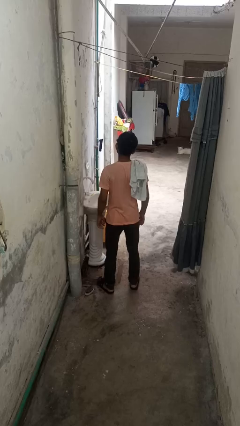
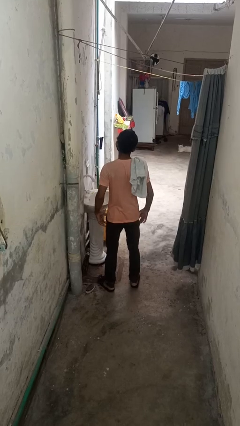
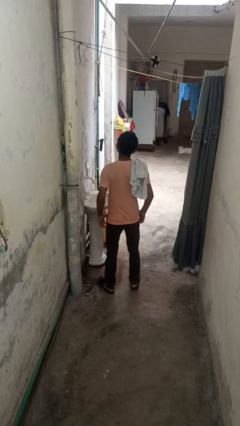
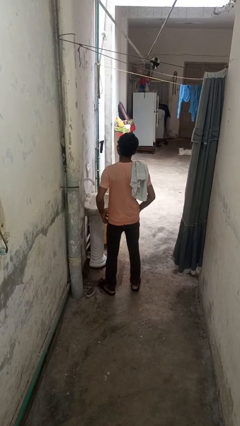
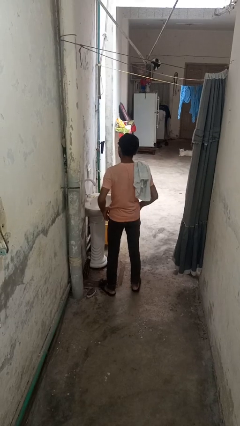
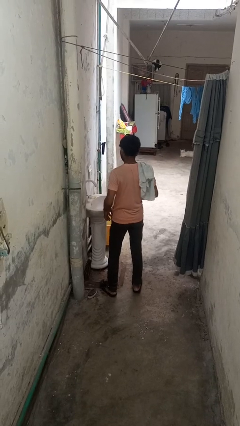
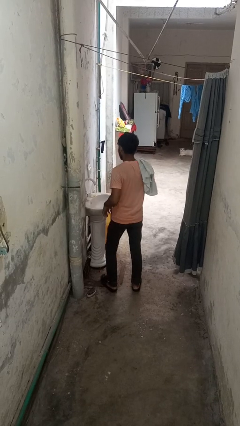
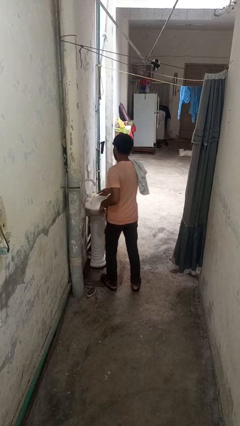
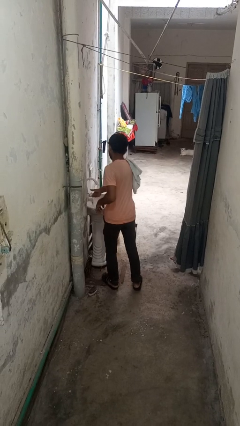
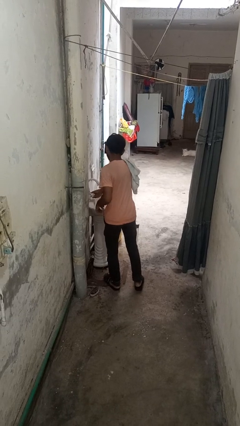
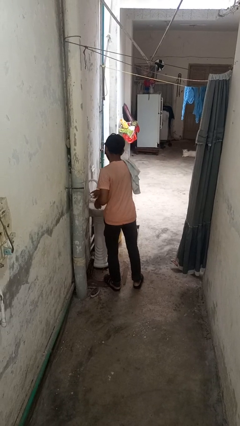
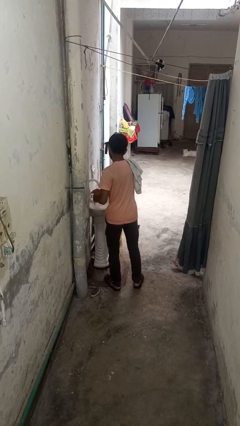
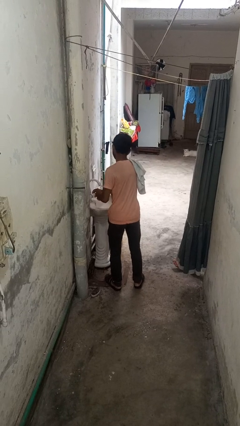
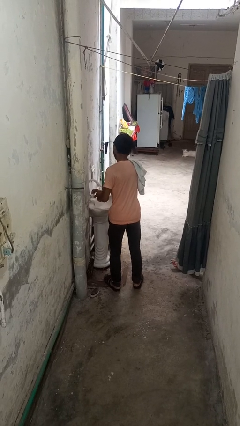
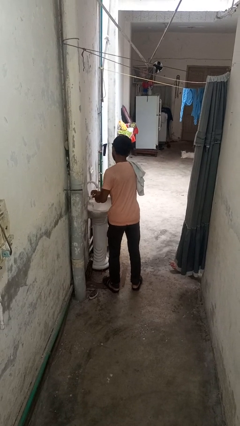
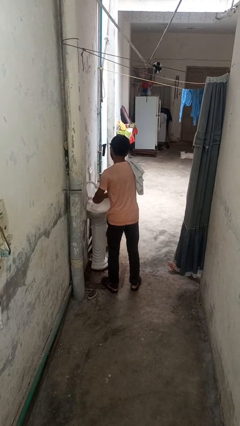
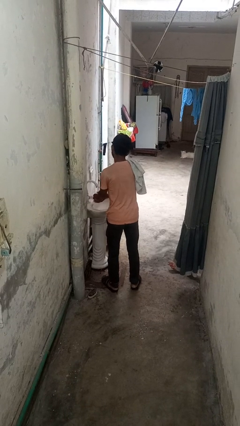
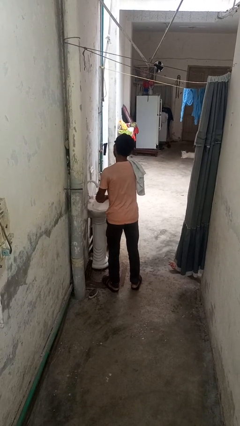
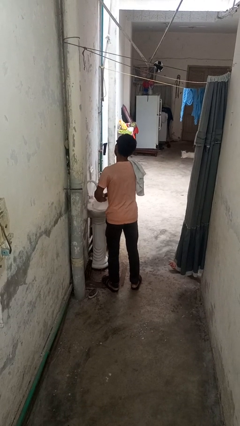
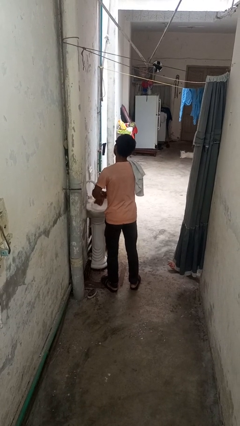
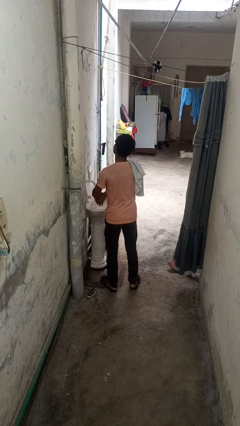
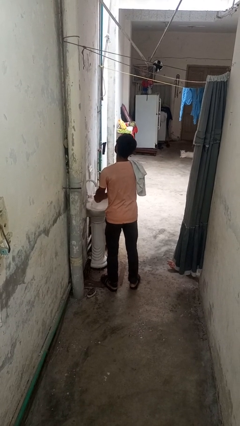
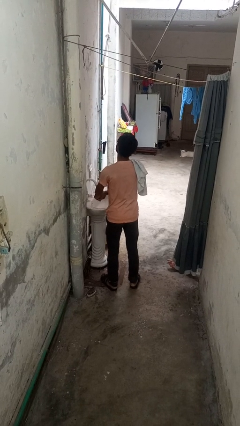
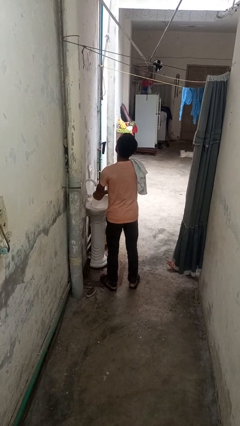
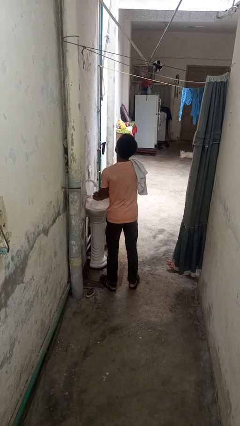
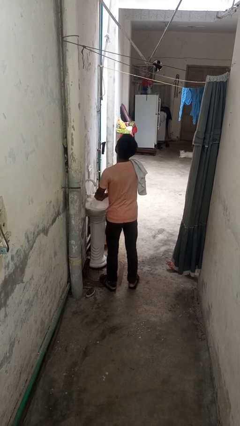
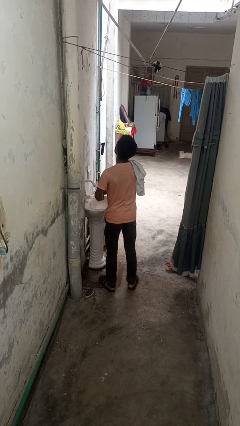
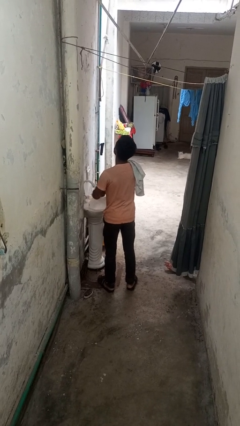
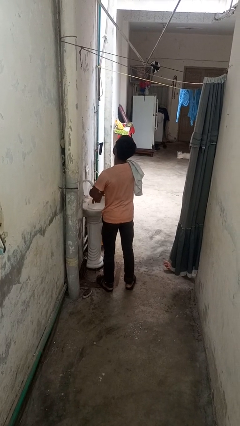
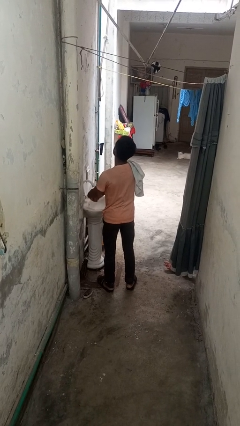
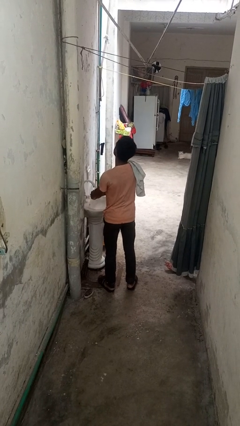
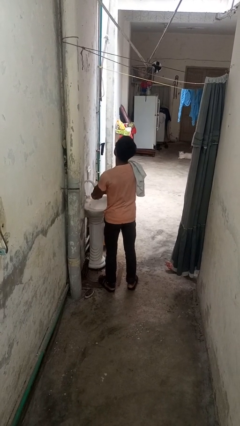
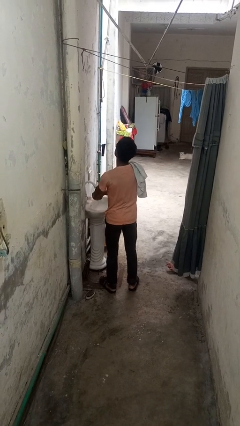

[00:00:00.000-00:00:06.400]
person washes hands

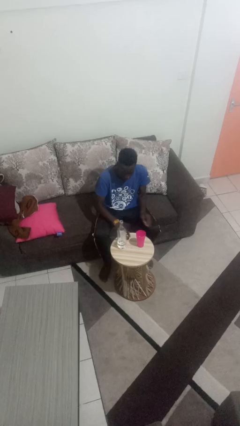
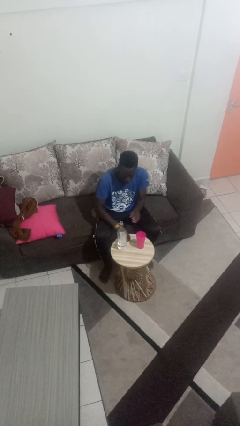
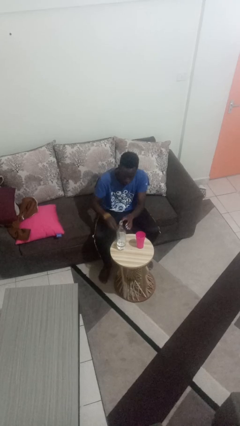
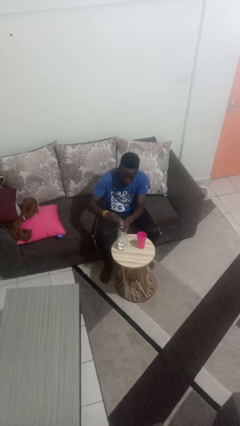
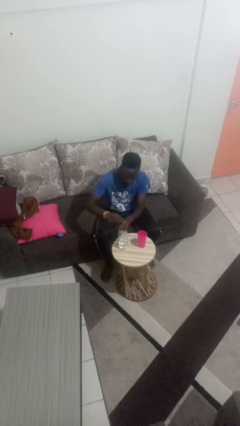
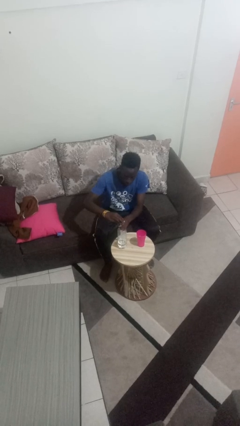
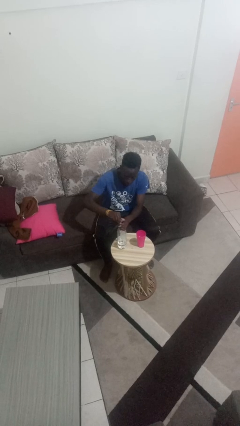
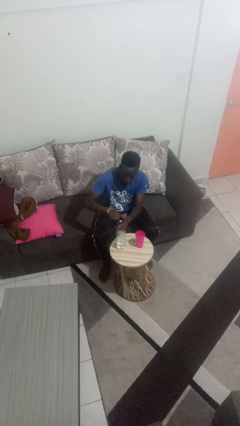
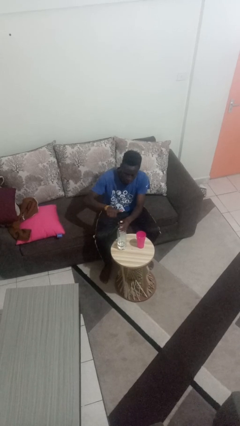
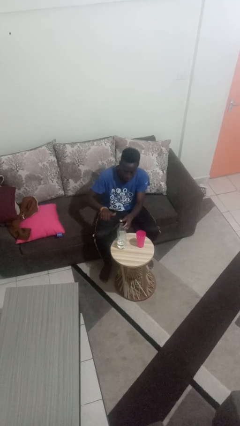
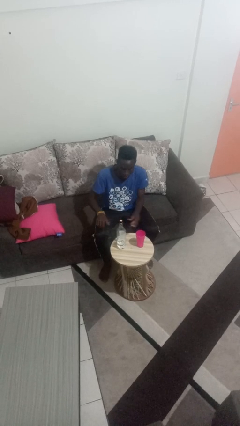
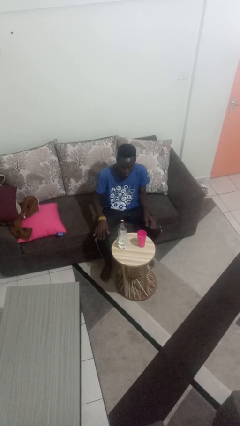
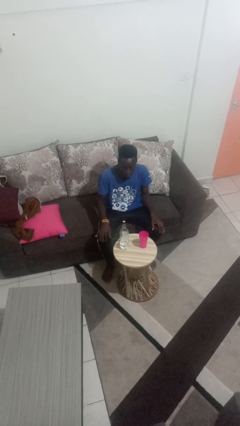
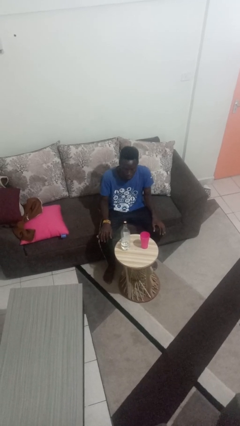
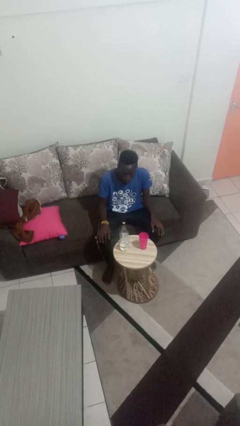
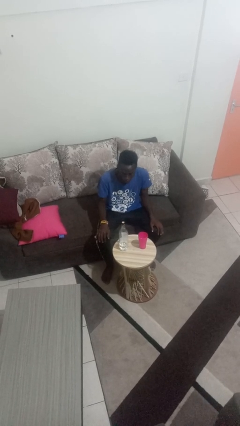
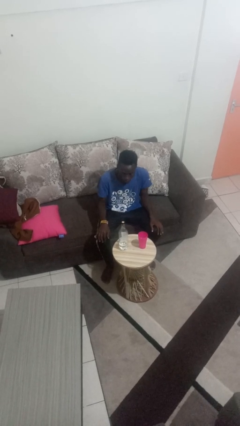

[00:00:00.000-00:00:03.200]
person screws lid to bottle

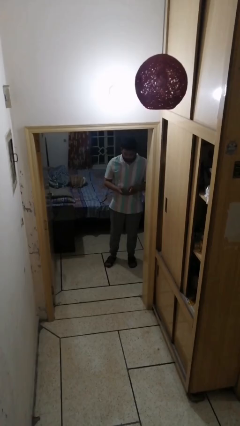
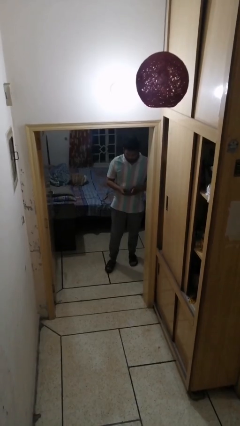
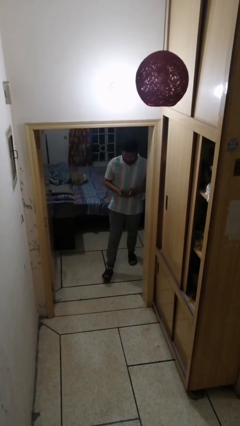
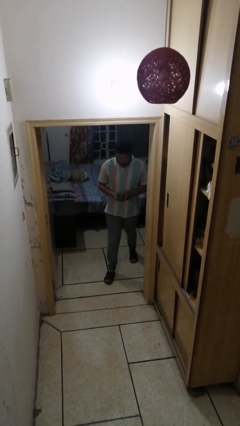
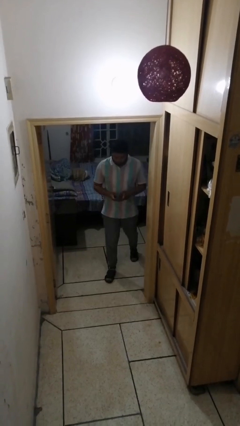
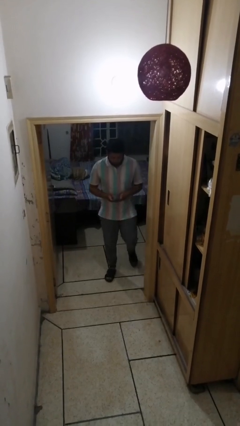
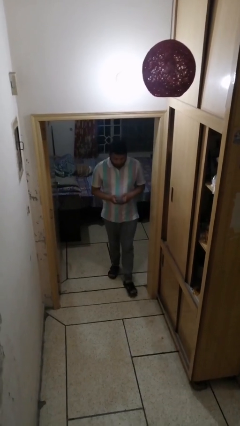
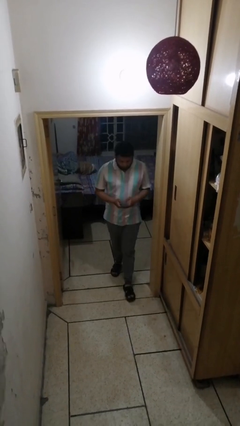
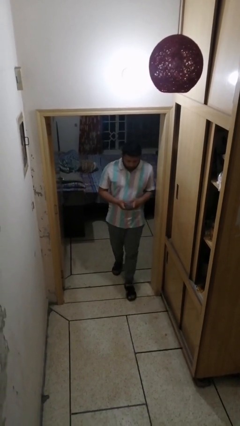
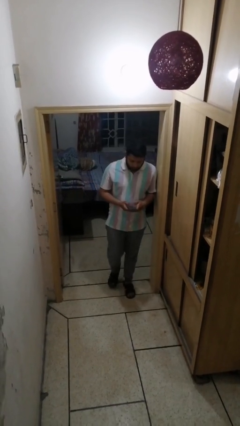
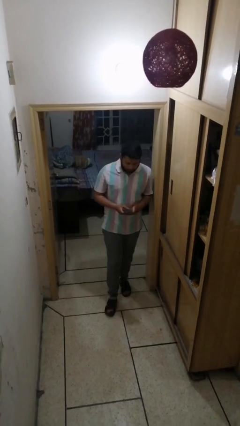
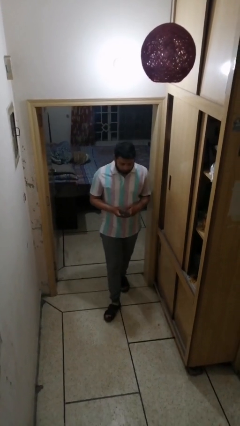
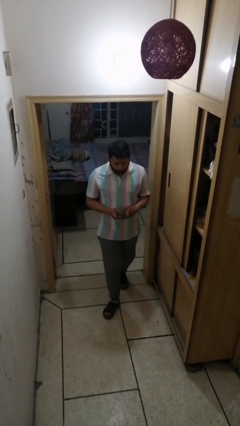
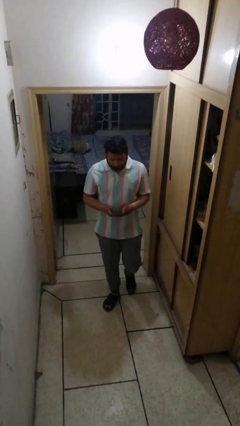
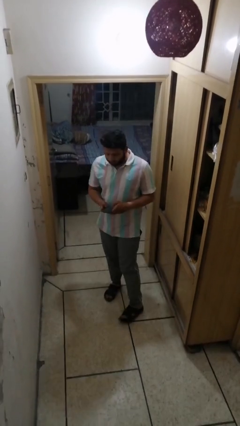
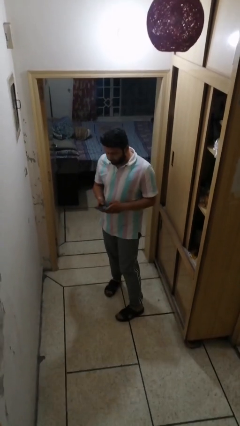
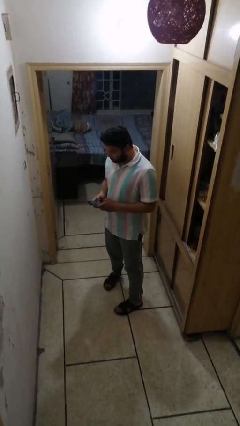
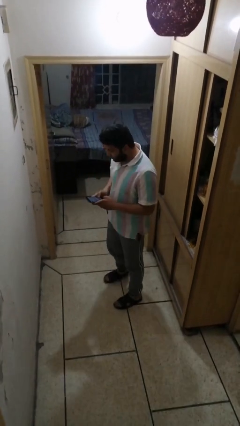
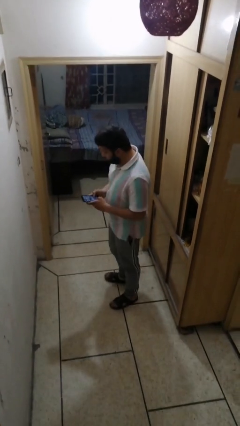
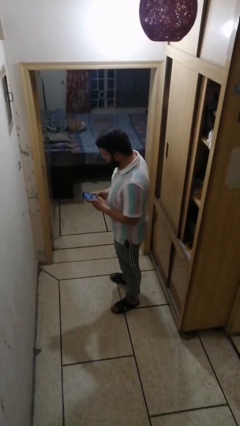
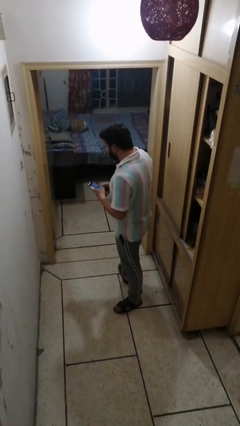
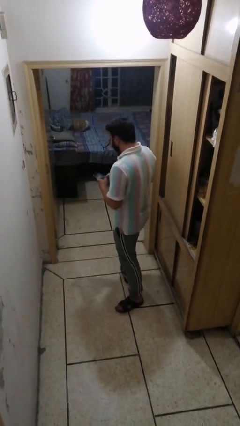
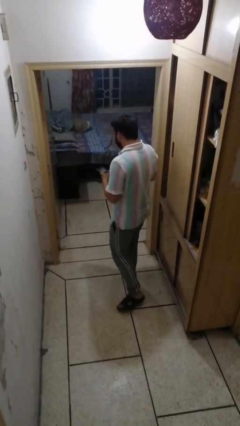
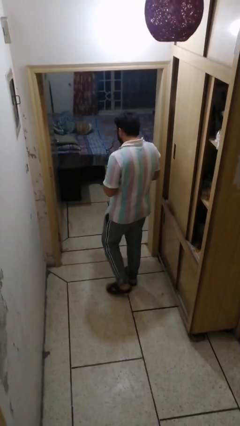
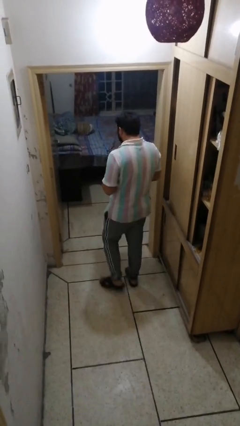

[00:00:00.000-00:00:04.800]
person enters scene through structure

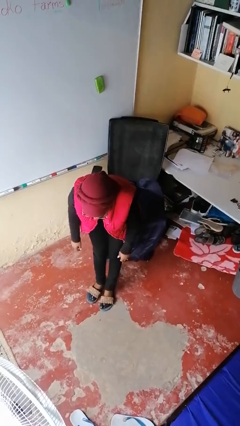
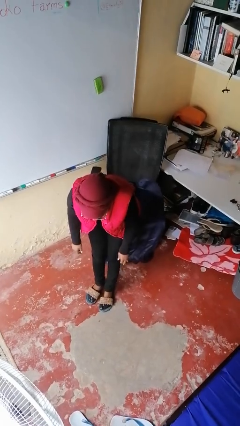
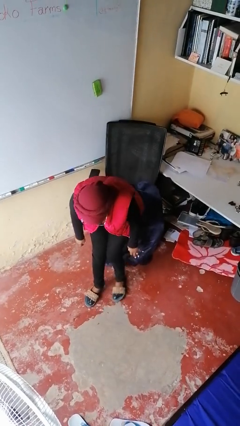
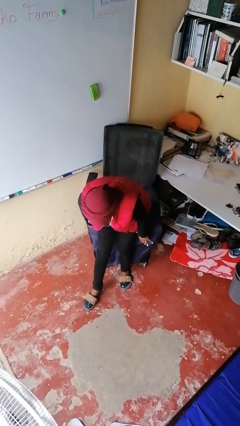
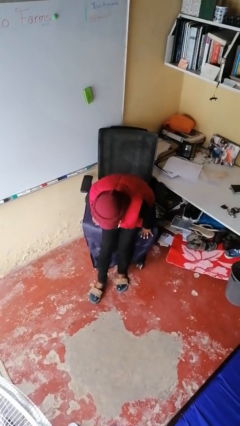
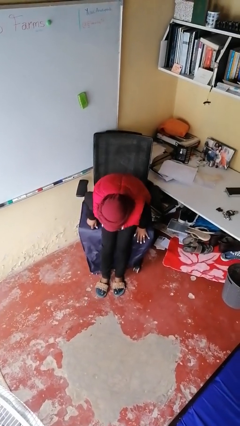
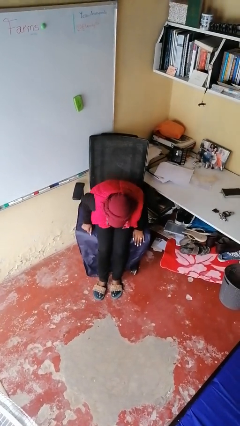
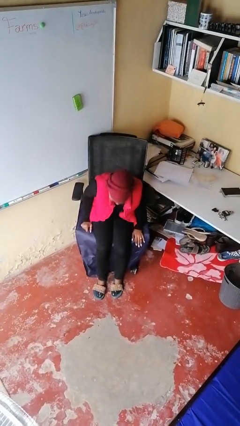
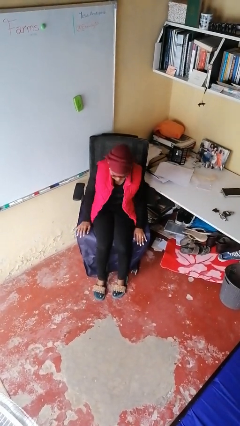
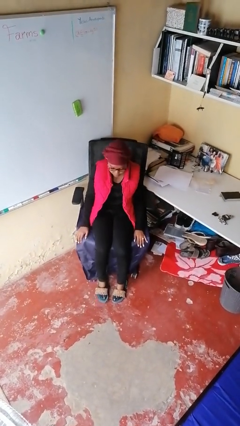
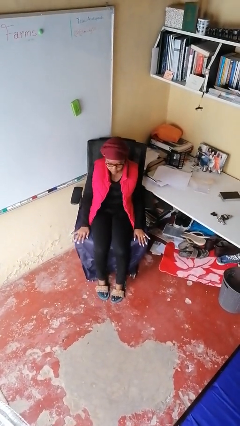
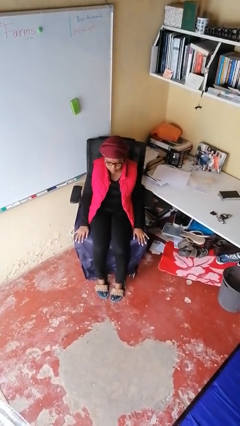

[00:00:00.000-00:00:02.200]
person sits down

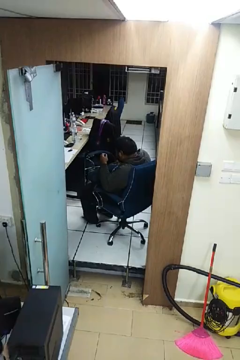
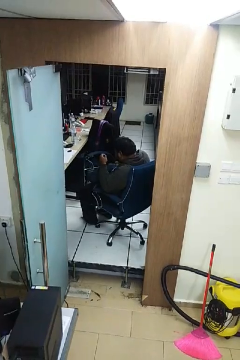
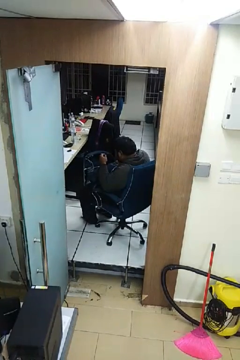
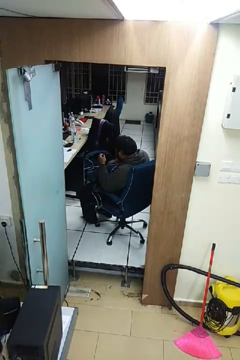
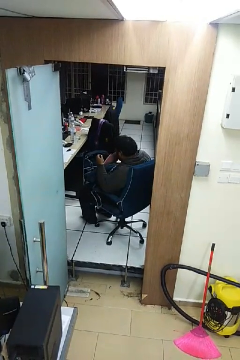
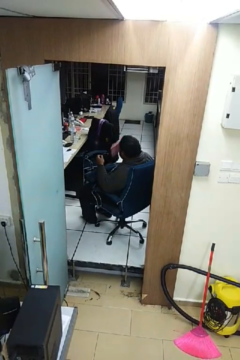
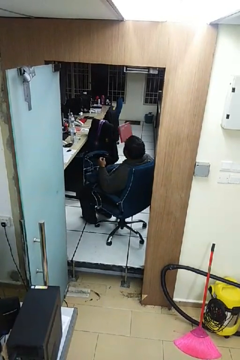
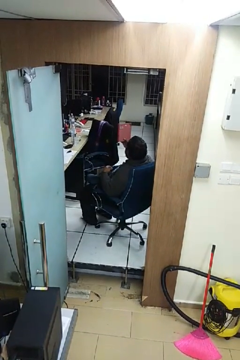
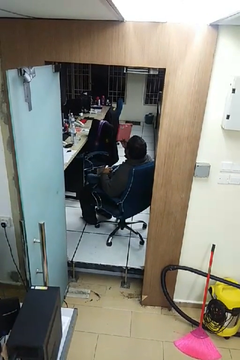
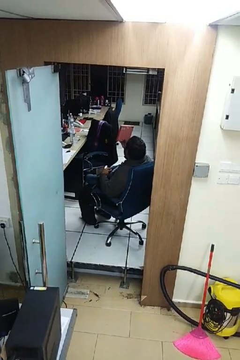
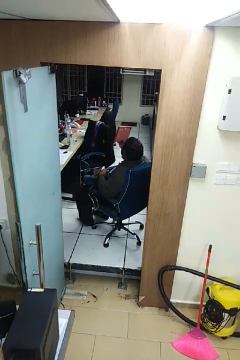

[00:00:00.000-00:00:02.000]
person takes object from backpack
